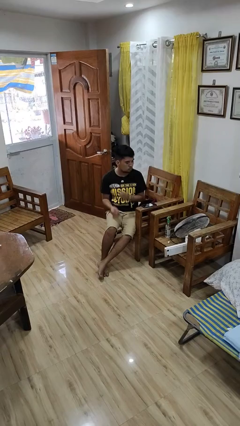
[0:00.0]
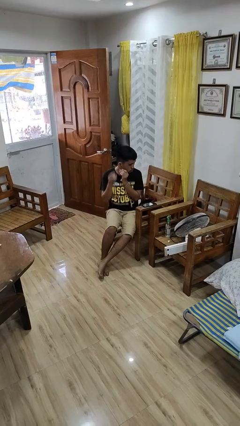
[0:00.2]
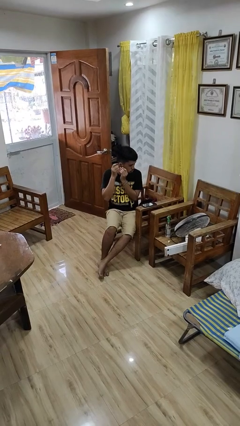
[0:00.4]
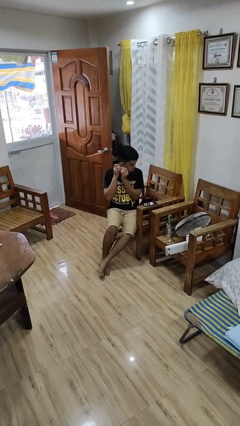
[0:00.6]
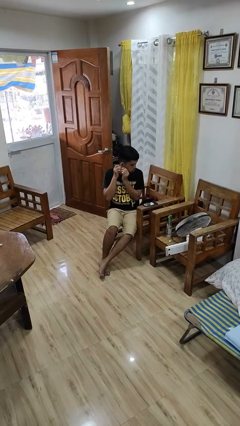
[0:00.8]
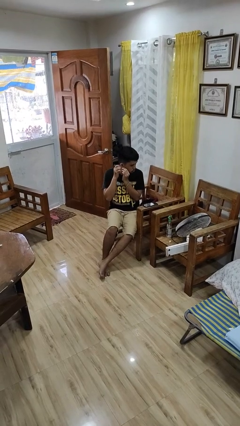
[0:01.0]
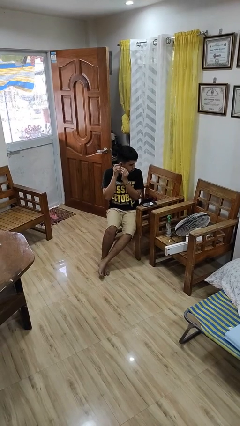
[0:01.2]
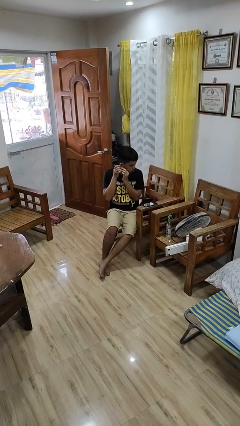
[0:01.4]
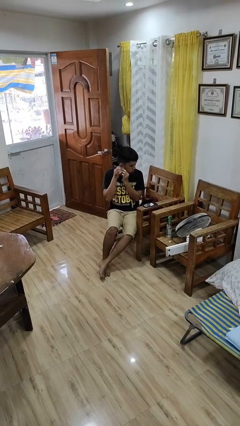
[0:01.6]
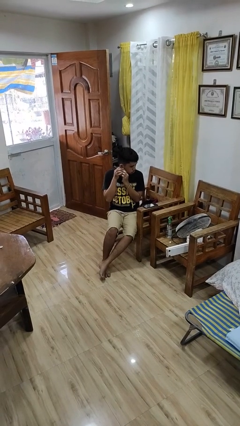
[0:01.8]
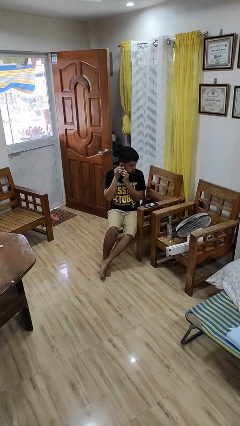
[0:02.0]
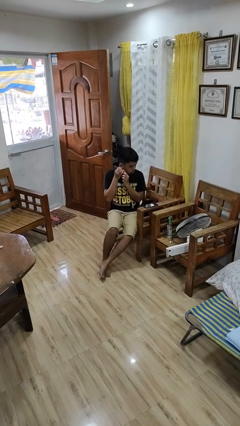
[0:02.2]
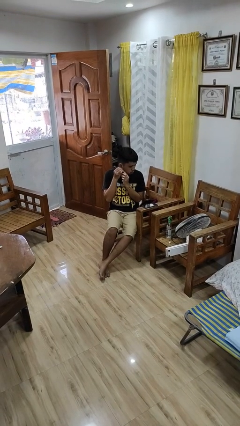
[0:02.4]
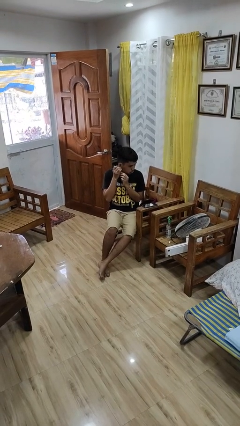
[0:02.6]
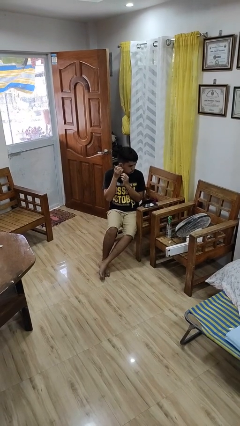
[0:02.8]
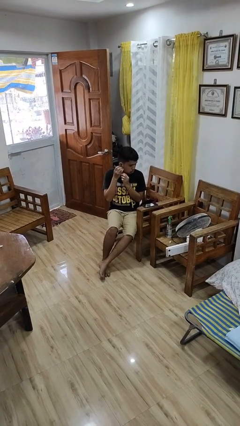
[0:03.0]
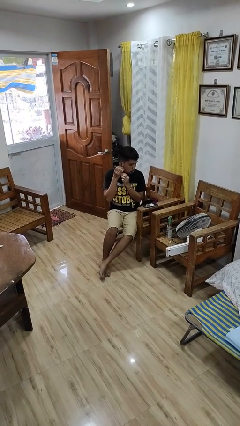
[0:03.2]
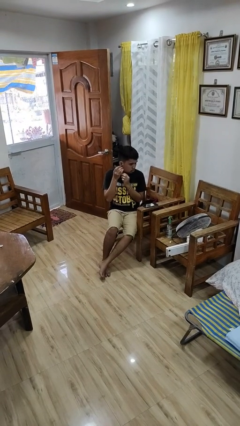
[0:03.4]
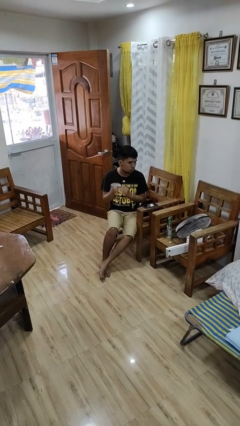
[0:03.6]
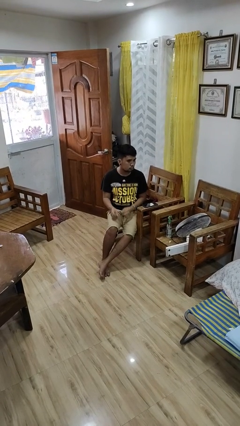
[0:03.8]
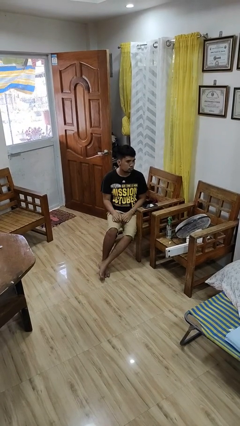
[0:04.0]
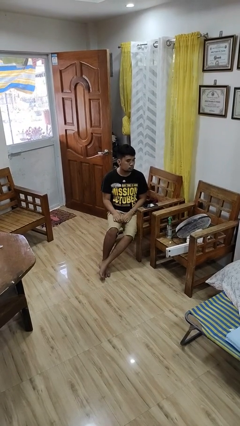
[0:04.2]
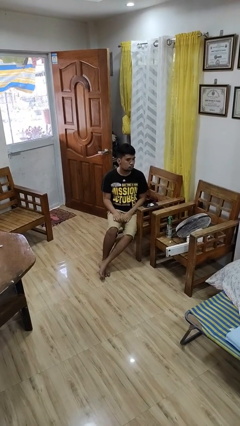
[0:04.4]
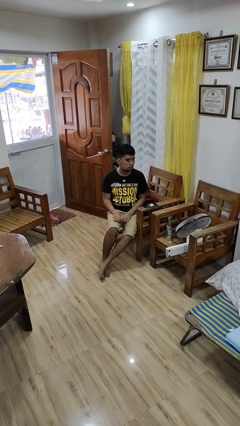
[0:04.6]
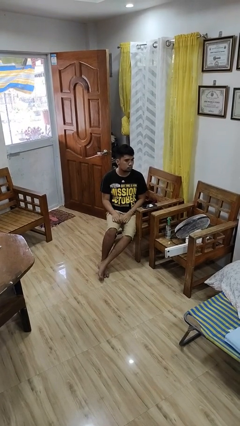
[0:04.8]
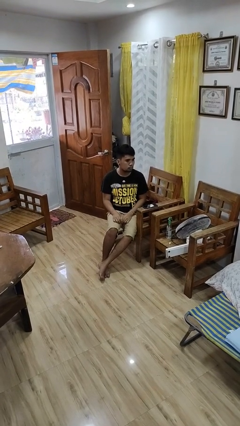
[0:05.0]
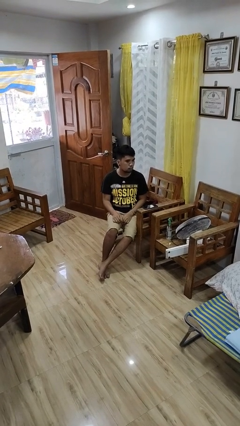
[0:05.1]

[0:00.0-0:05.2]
person puts on earrings

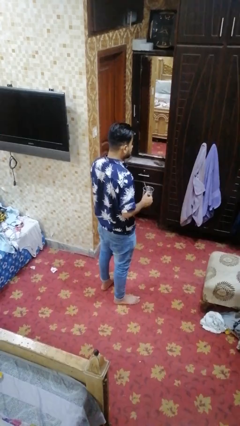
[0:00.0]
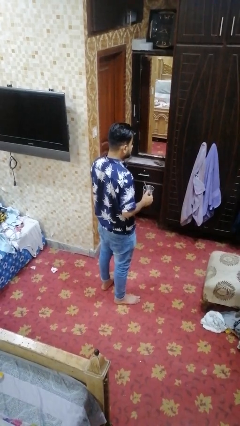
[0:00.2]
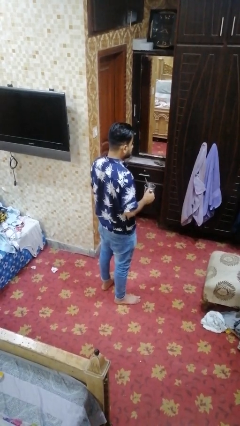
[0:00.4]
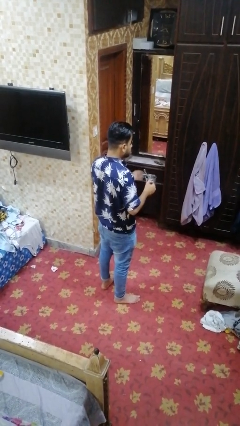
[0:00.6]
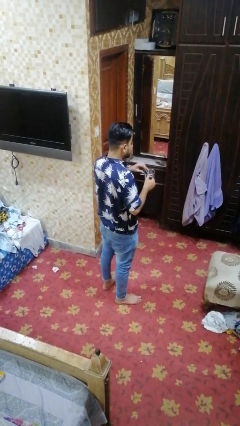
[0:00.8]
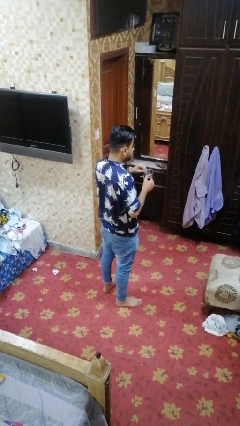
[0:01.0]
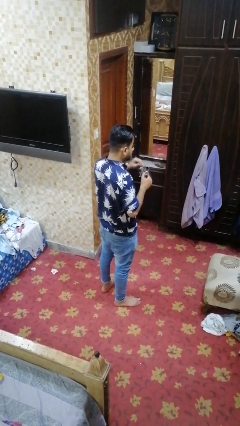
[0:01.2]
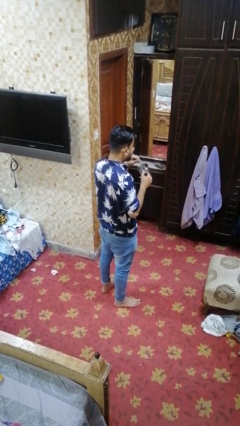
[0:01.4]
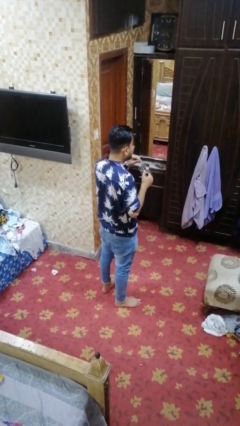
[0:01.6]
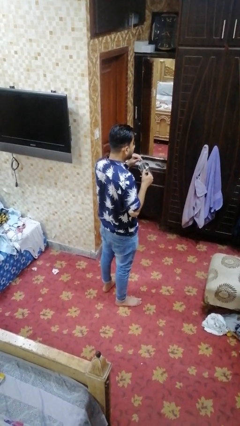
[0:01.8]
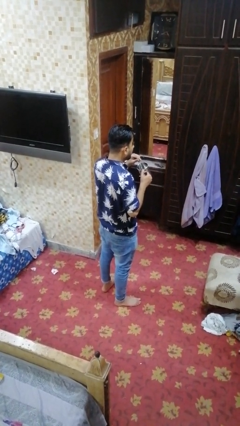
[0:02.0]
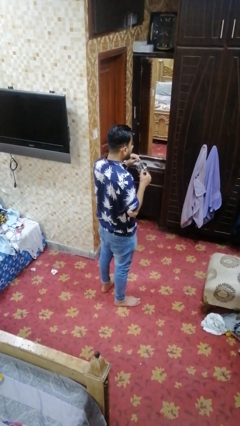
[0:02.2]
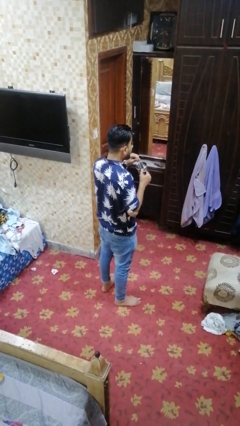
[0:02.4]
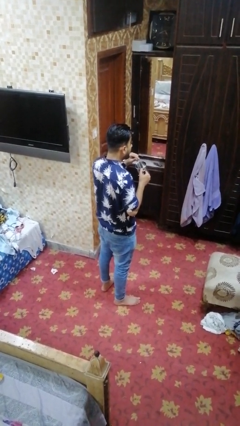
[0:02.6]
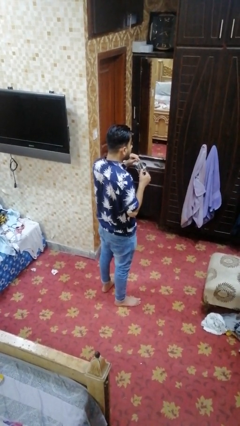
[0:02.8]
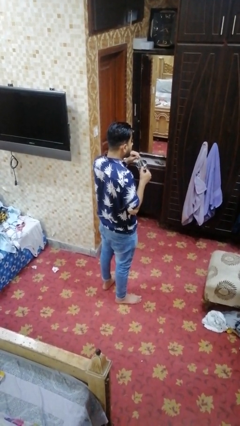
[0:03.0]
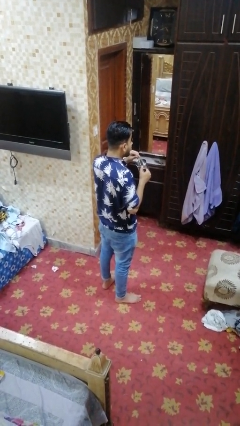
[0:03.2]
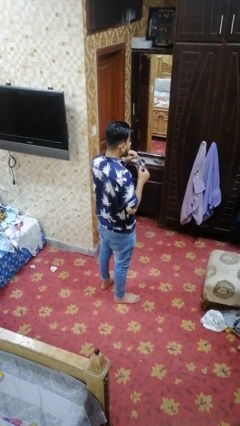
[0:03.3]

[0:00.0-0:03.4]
person drinks from straw

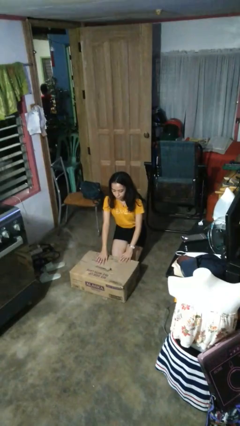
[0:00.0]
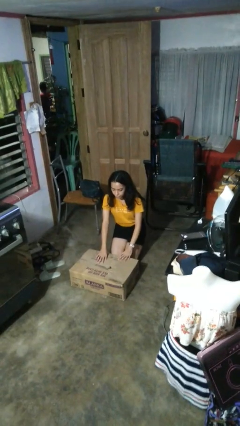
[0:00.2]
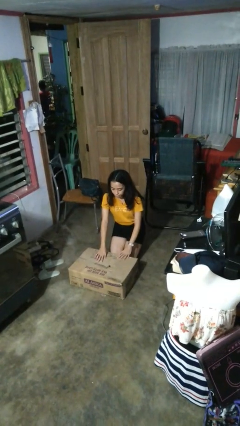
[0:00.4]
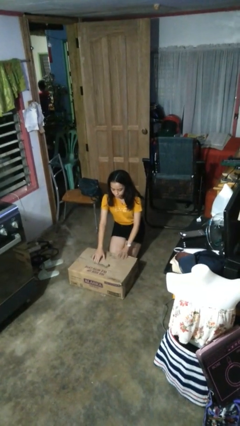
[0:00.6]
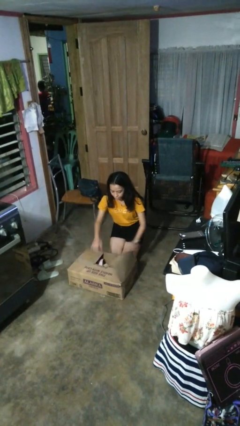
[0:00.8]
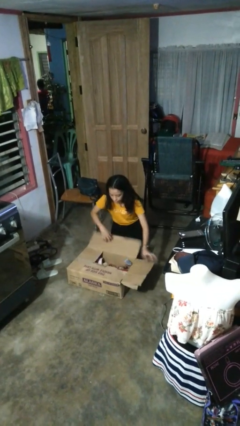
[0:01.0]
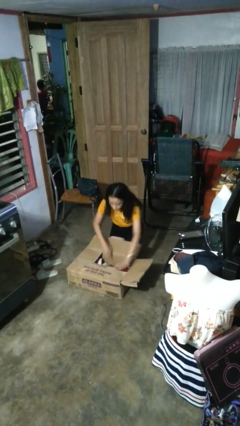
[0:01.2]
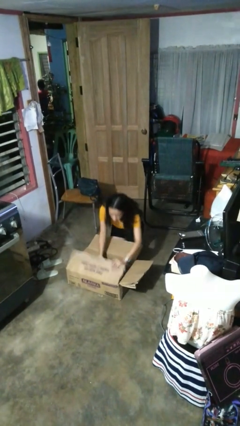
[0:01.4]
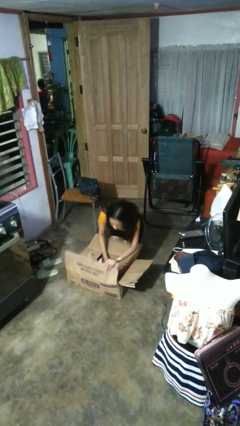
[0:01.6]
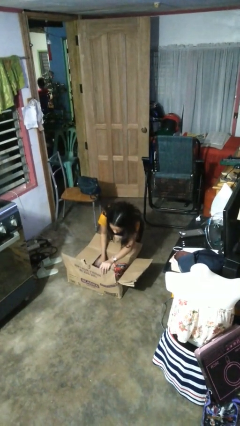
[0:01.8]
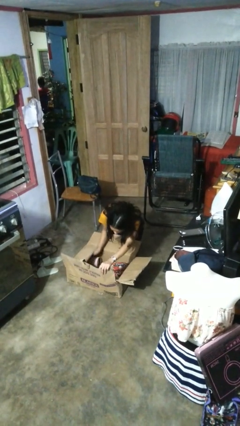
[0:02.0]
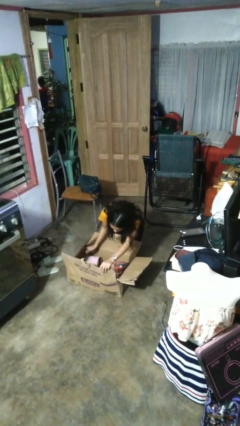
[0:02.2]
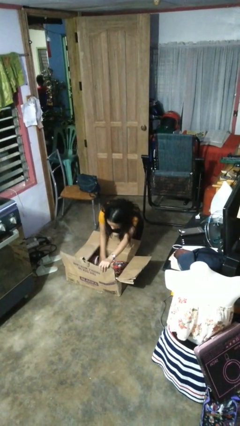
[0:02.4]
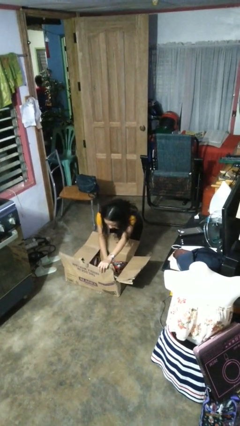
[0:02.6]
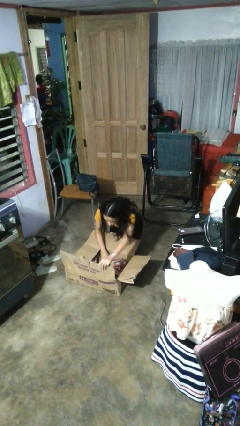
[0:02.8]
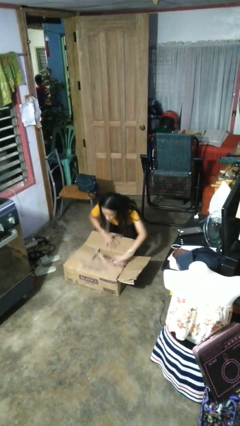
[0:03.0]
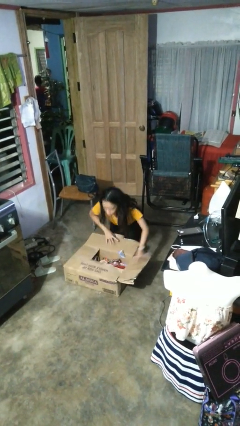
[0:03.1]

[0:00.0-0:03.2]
person searches in box

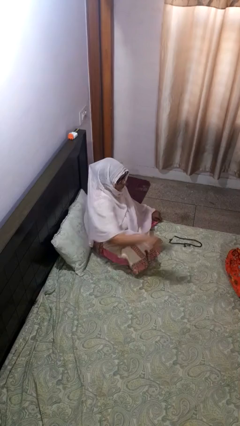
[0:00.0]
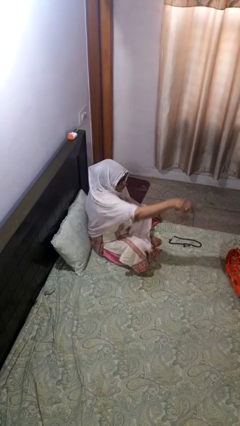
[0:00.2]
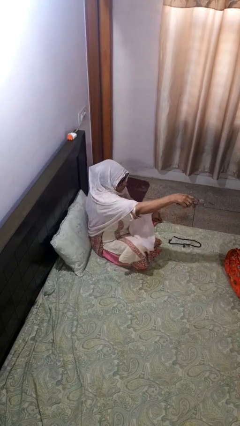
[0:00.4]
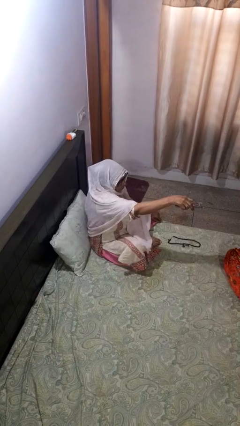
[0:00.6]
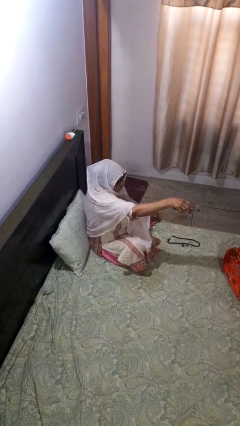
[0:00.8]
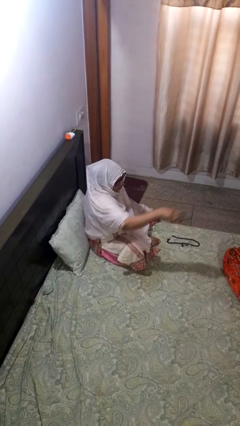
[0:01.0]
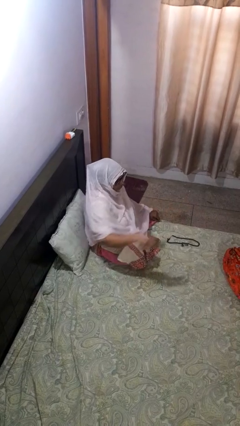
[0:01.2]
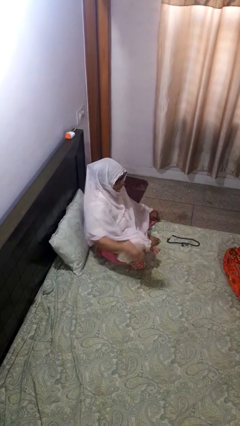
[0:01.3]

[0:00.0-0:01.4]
person uses television remote

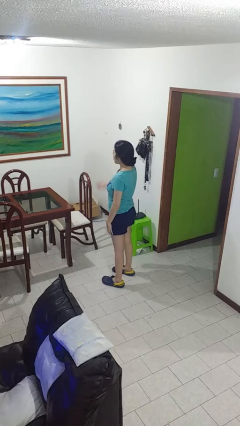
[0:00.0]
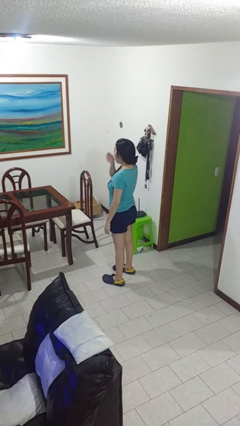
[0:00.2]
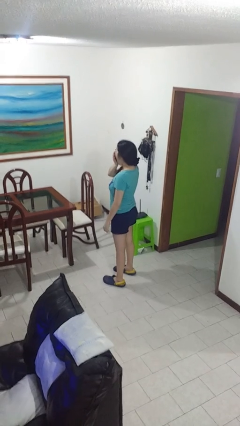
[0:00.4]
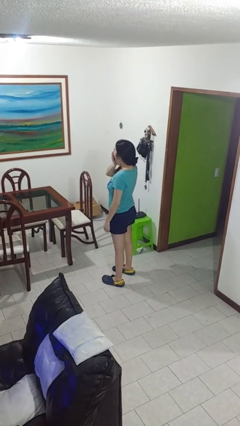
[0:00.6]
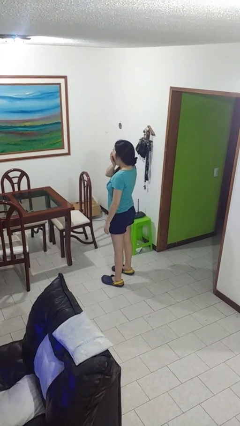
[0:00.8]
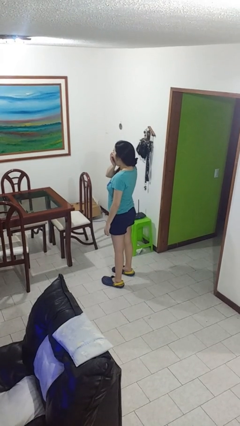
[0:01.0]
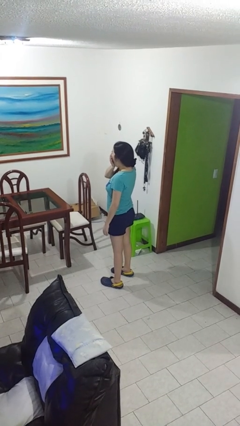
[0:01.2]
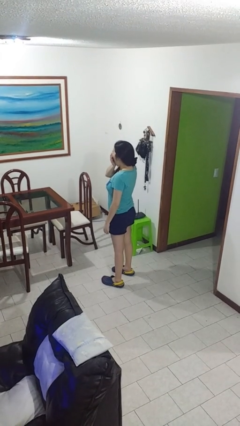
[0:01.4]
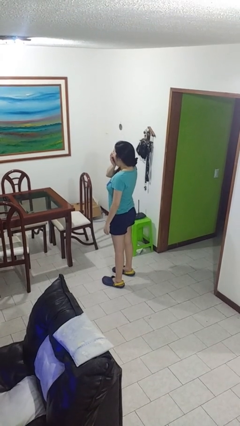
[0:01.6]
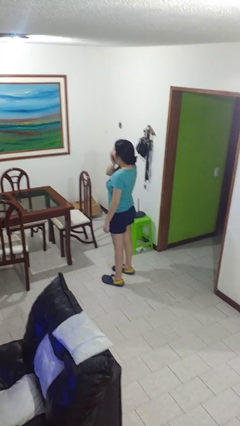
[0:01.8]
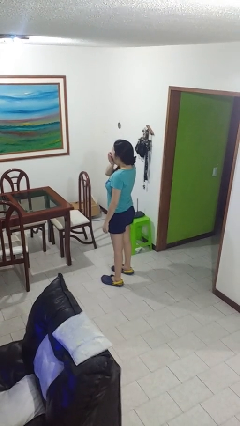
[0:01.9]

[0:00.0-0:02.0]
person yawns

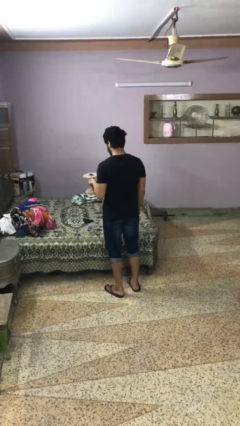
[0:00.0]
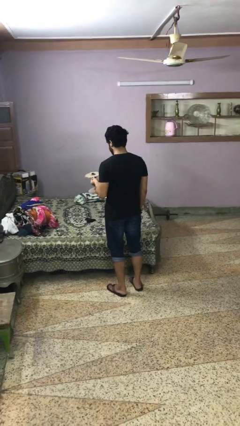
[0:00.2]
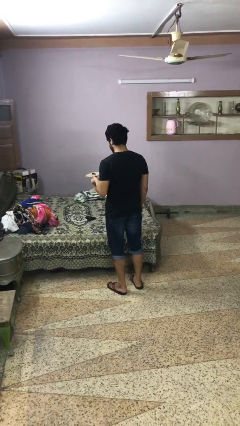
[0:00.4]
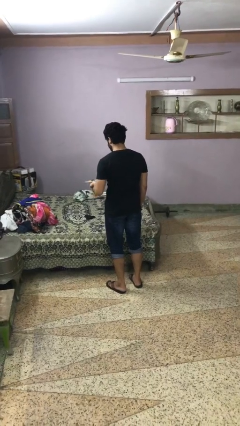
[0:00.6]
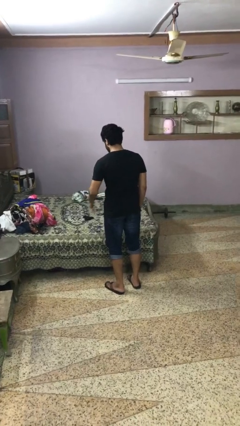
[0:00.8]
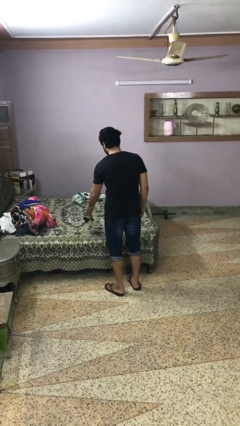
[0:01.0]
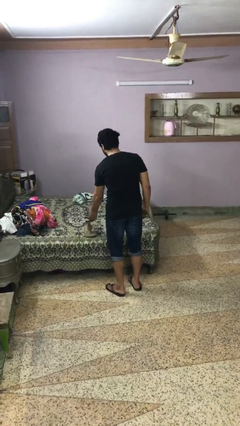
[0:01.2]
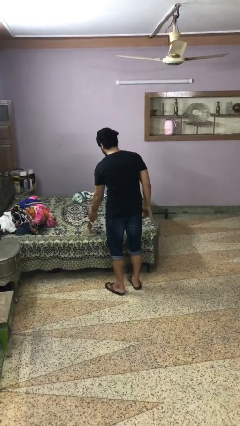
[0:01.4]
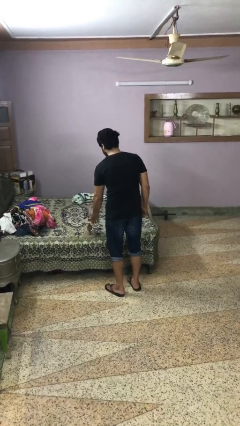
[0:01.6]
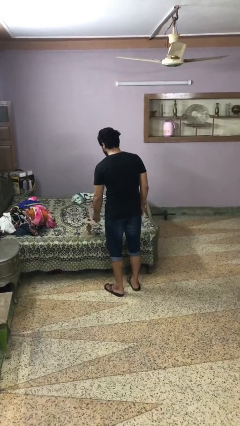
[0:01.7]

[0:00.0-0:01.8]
person puts down object on bed
